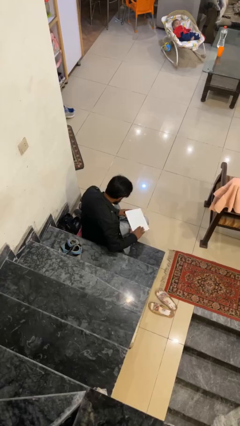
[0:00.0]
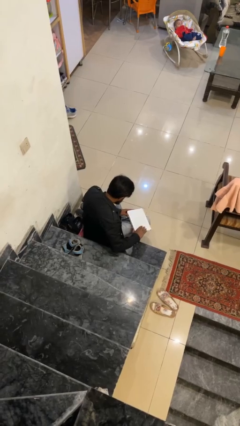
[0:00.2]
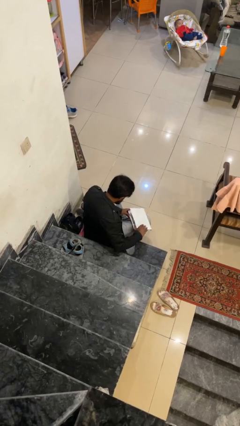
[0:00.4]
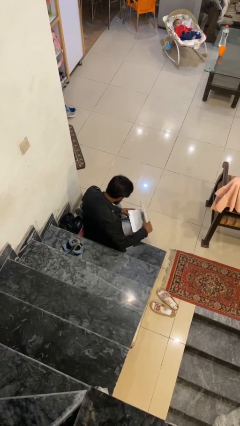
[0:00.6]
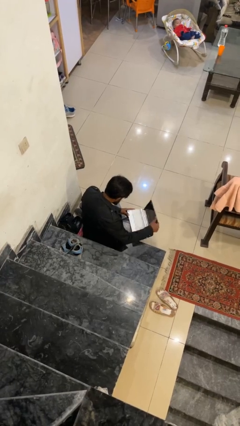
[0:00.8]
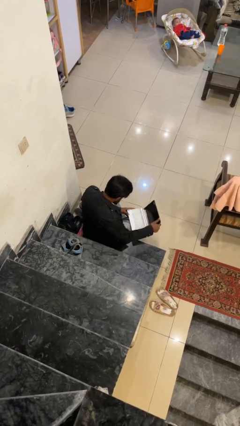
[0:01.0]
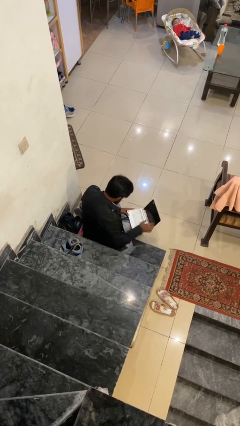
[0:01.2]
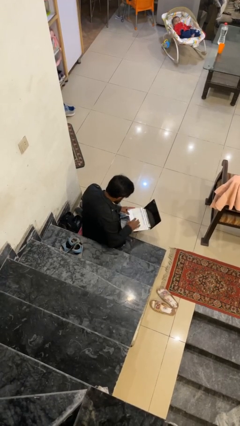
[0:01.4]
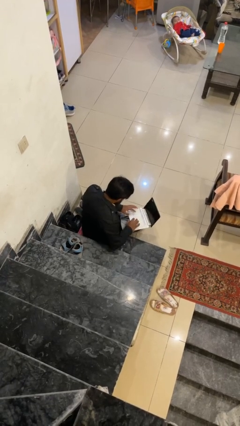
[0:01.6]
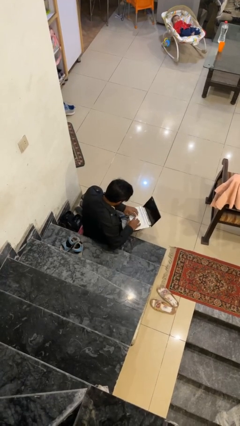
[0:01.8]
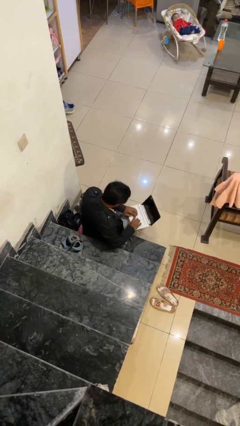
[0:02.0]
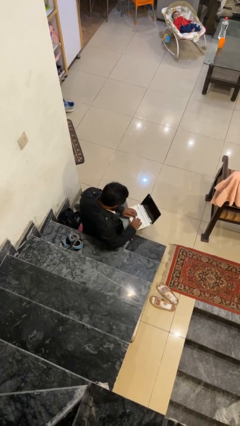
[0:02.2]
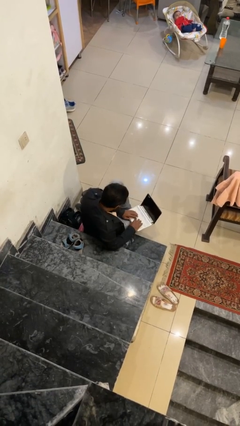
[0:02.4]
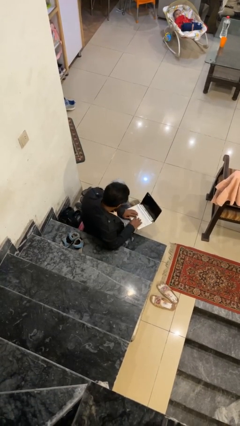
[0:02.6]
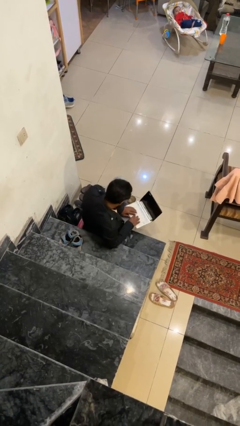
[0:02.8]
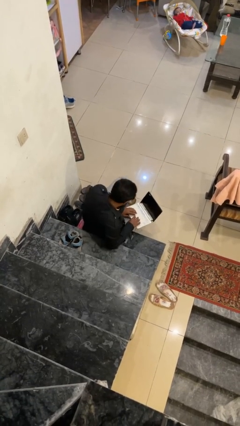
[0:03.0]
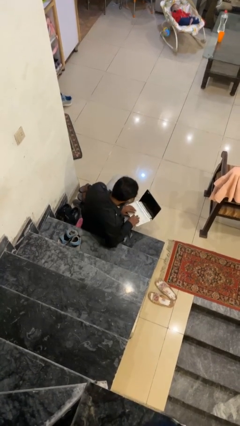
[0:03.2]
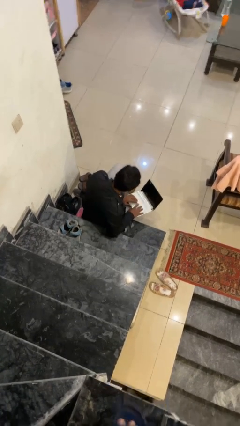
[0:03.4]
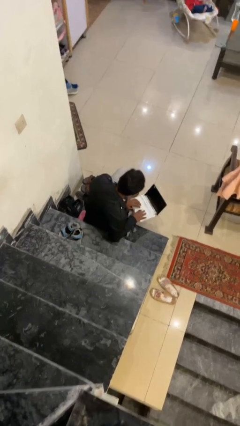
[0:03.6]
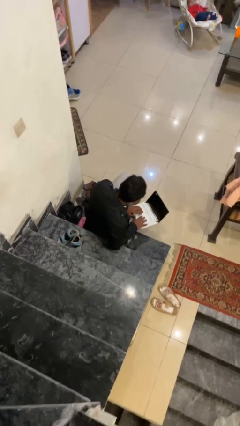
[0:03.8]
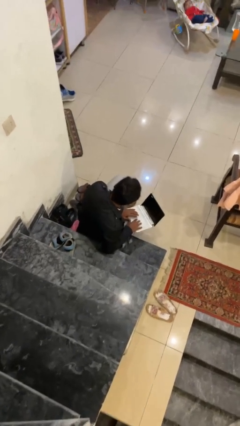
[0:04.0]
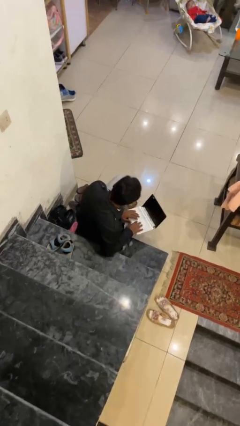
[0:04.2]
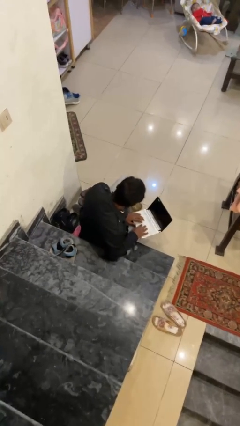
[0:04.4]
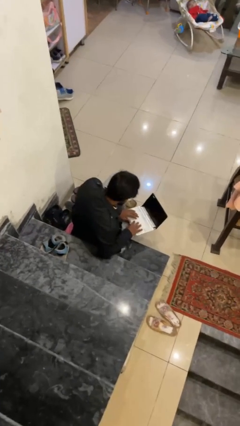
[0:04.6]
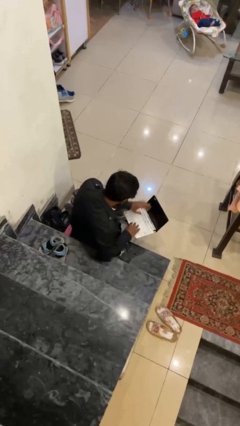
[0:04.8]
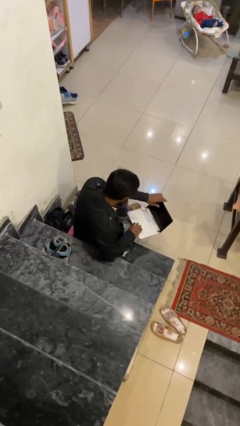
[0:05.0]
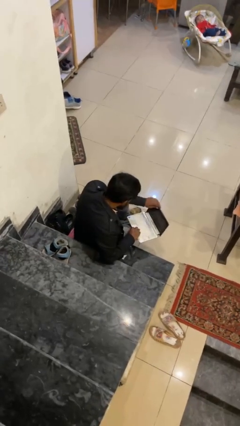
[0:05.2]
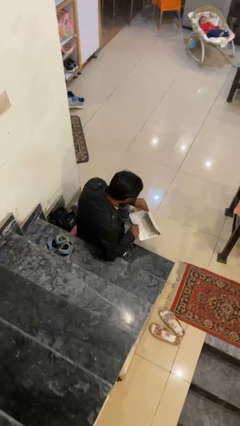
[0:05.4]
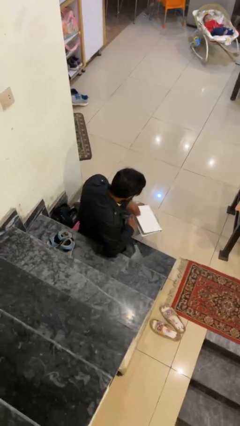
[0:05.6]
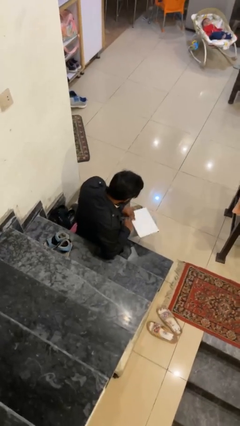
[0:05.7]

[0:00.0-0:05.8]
person interacts with laptop

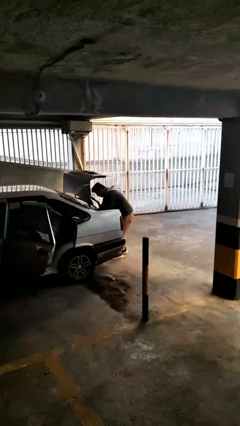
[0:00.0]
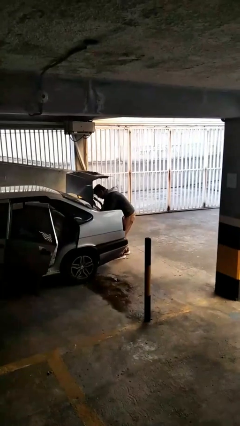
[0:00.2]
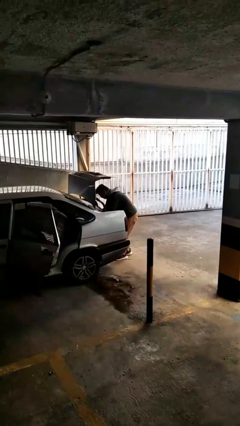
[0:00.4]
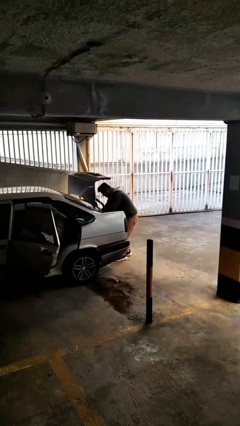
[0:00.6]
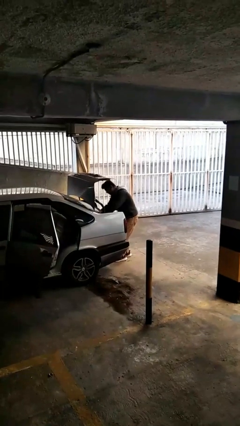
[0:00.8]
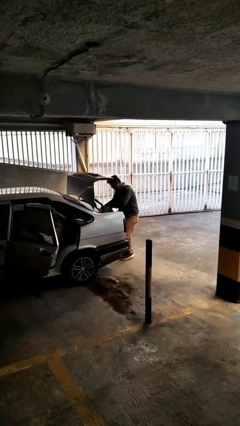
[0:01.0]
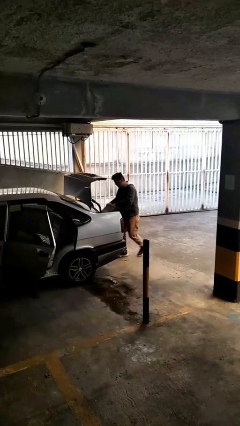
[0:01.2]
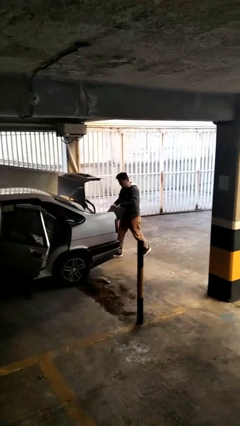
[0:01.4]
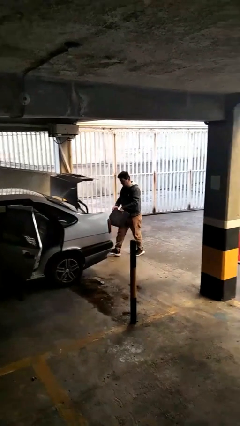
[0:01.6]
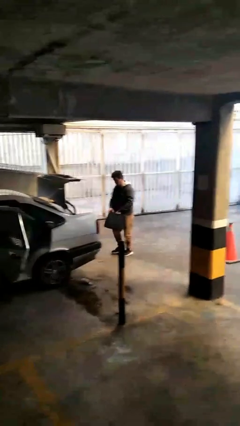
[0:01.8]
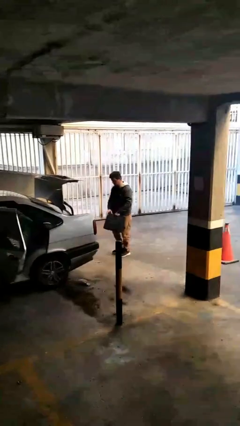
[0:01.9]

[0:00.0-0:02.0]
person unloads car

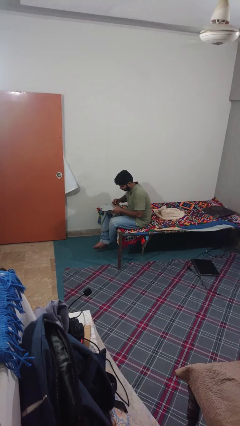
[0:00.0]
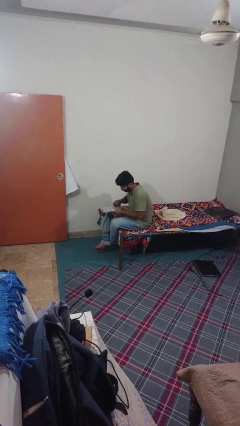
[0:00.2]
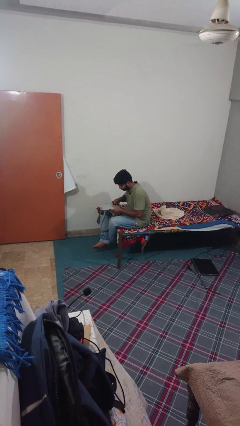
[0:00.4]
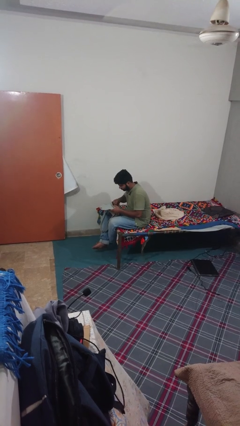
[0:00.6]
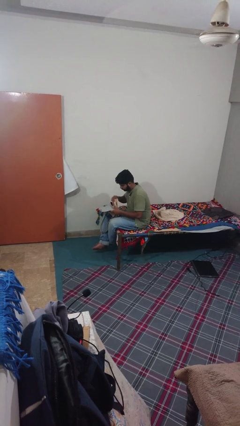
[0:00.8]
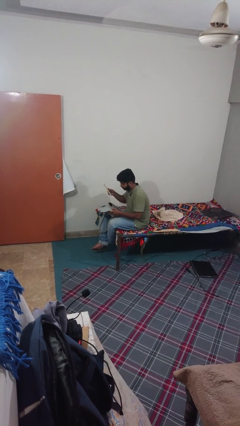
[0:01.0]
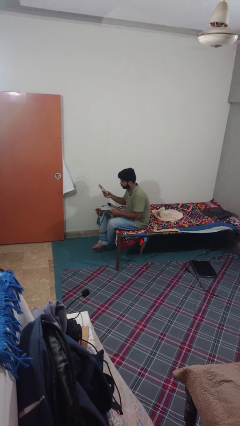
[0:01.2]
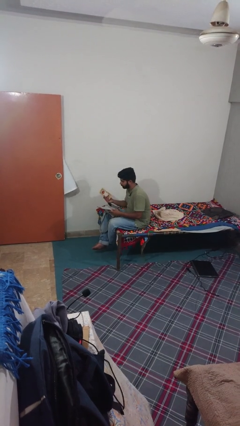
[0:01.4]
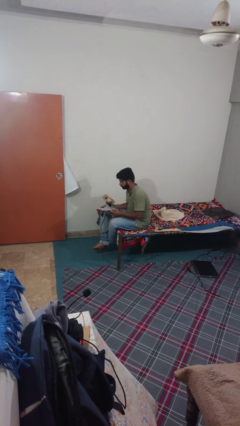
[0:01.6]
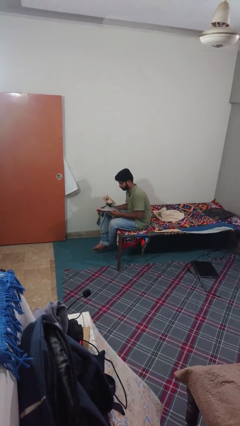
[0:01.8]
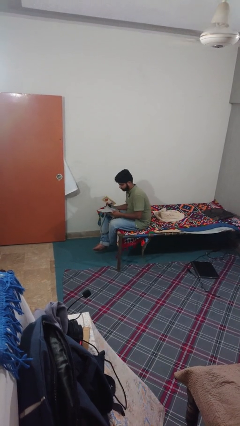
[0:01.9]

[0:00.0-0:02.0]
person takes object from purse

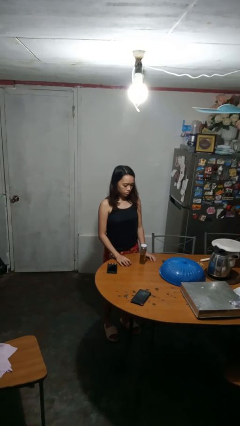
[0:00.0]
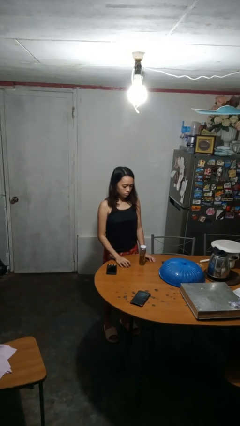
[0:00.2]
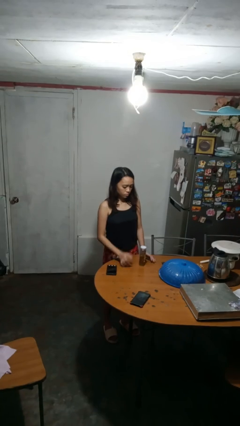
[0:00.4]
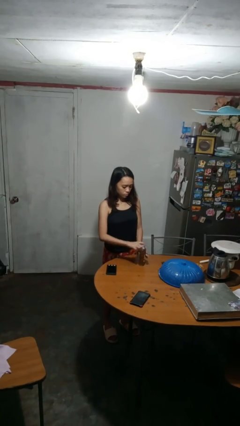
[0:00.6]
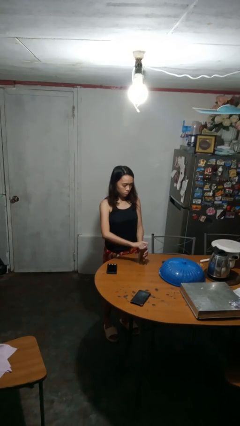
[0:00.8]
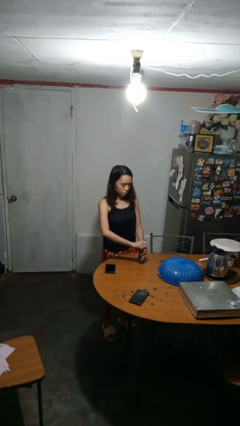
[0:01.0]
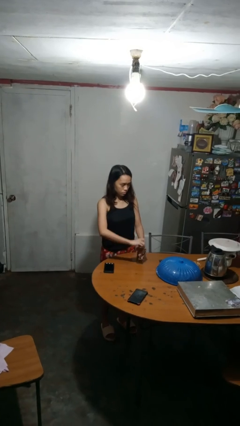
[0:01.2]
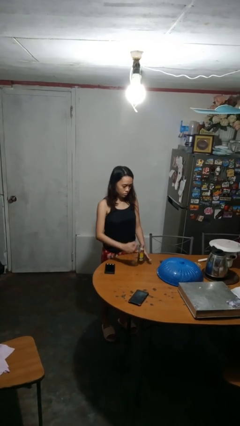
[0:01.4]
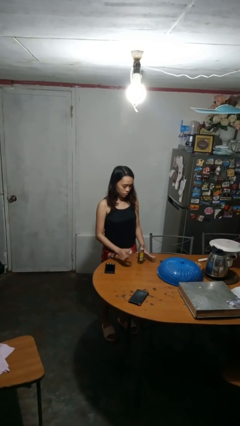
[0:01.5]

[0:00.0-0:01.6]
person opens jar

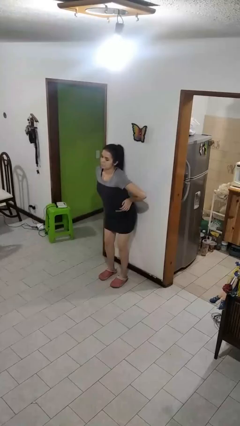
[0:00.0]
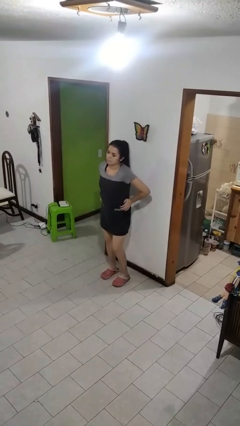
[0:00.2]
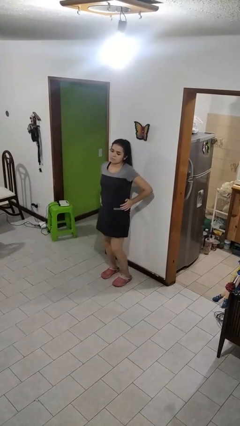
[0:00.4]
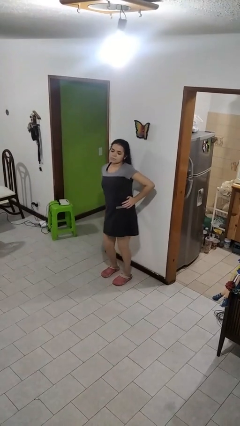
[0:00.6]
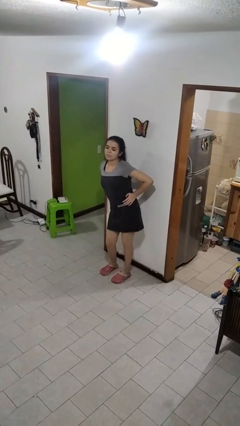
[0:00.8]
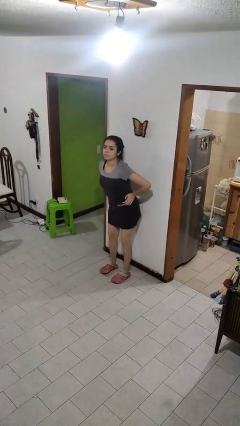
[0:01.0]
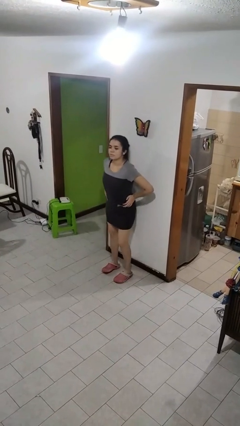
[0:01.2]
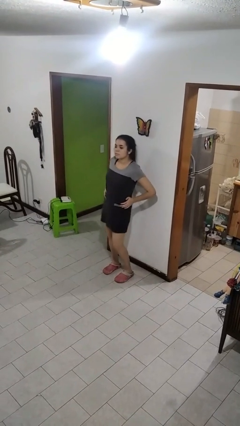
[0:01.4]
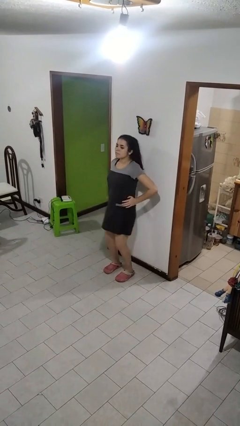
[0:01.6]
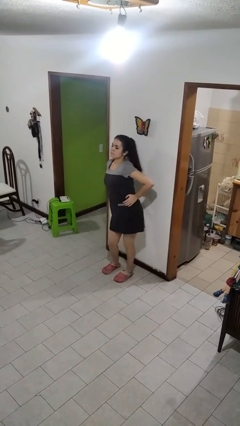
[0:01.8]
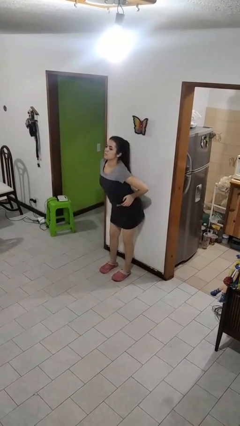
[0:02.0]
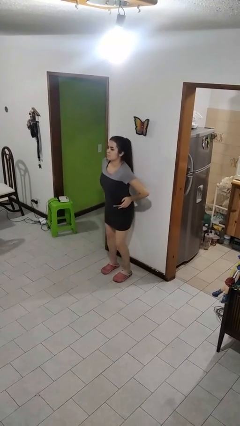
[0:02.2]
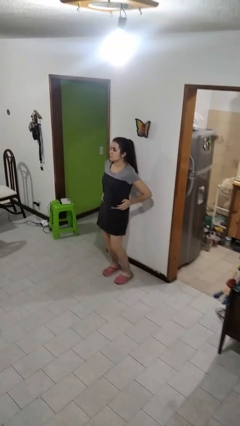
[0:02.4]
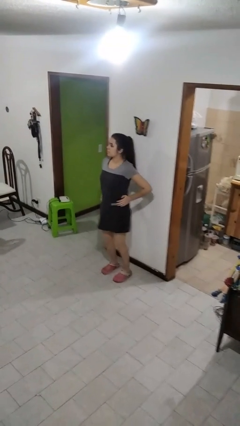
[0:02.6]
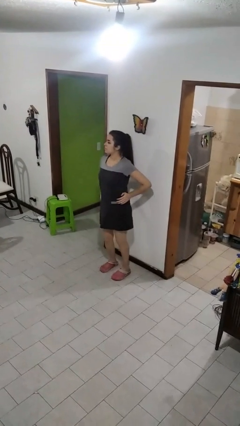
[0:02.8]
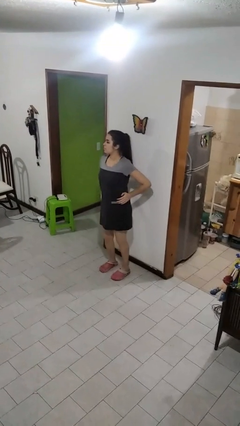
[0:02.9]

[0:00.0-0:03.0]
person wiggles hips

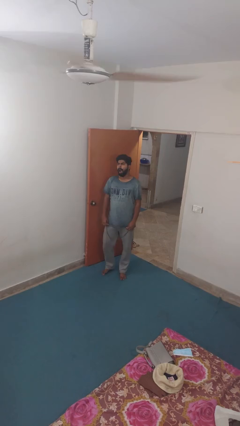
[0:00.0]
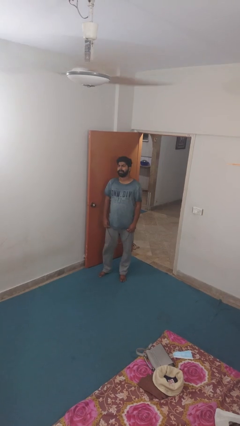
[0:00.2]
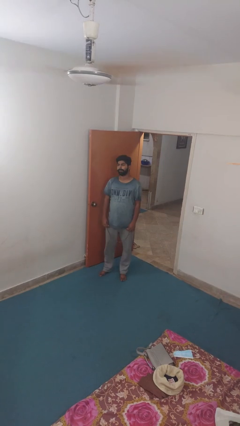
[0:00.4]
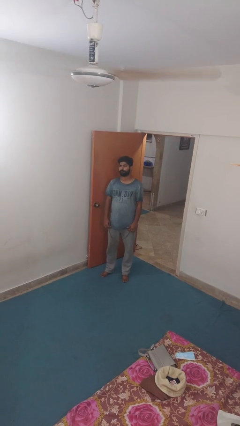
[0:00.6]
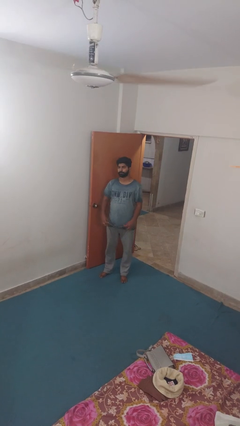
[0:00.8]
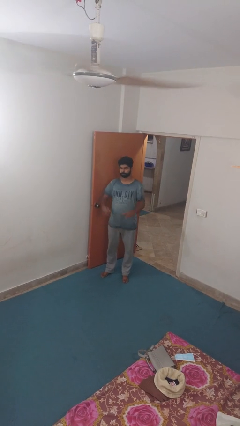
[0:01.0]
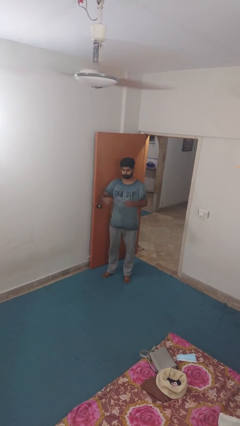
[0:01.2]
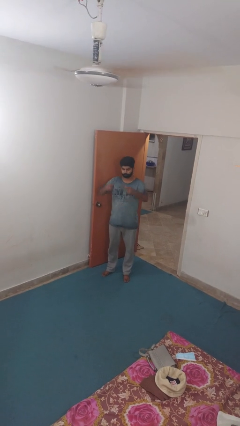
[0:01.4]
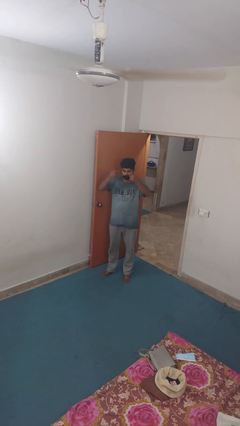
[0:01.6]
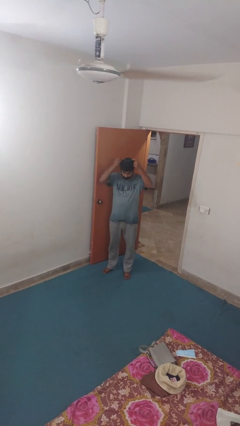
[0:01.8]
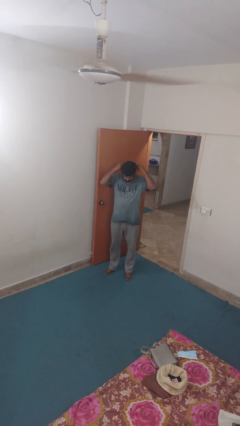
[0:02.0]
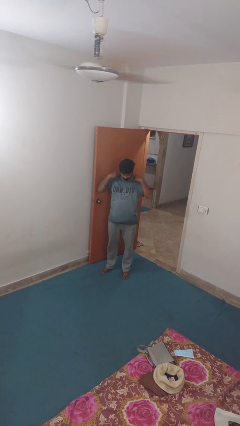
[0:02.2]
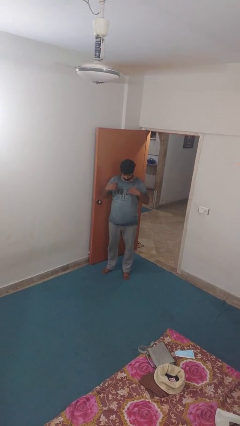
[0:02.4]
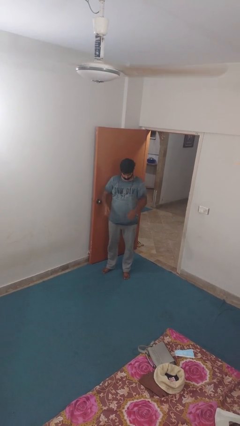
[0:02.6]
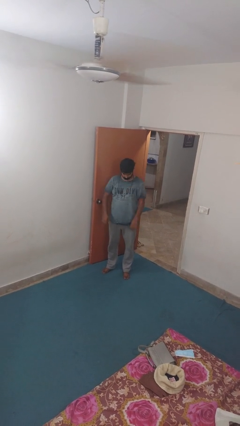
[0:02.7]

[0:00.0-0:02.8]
person puts on necklace
